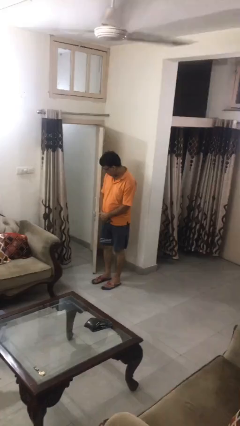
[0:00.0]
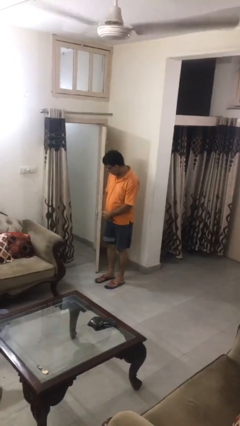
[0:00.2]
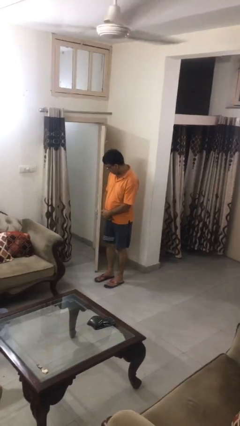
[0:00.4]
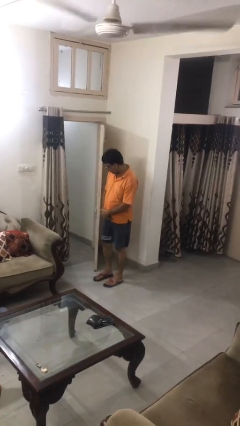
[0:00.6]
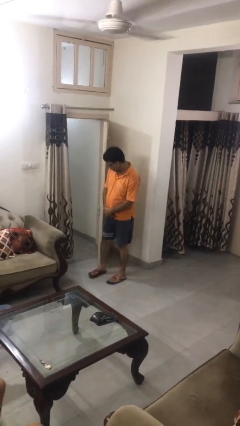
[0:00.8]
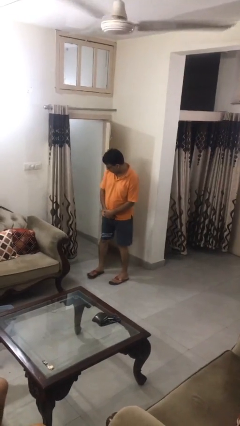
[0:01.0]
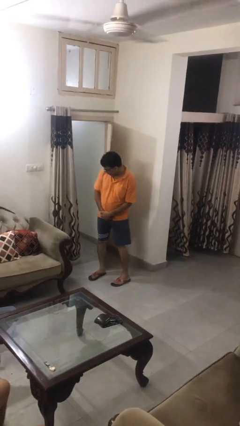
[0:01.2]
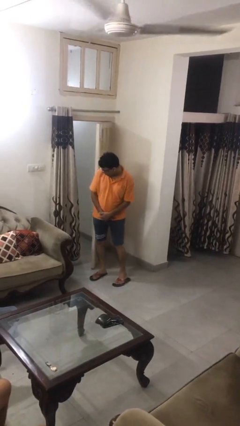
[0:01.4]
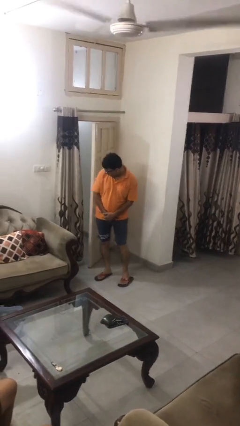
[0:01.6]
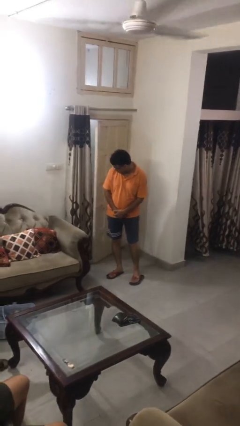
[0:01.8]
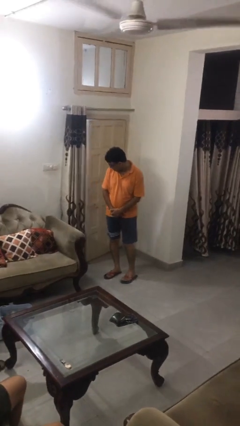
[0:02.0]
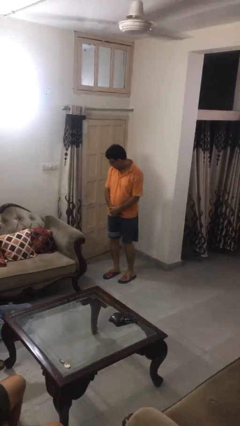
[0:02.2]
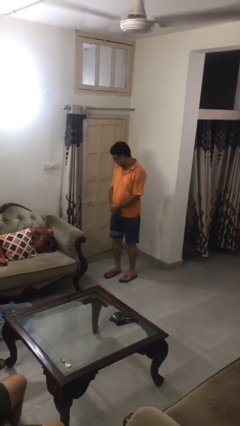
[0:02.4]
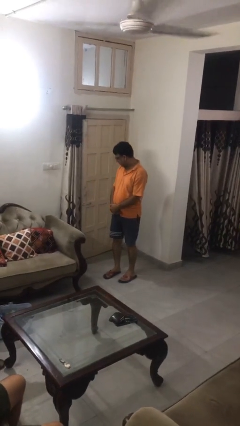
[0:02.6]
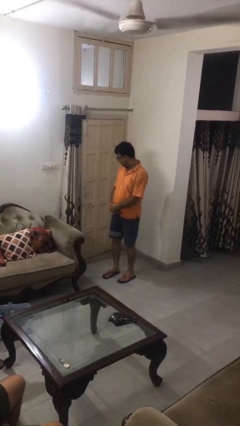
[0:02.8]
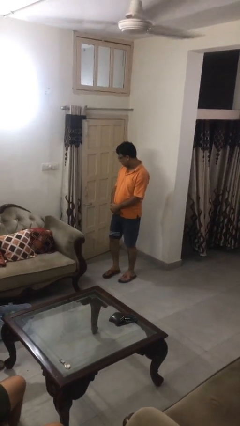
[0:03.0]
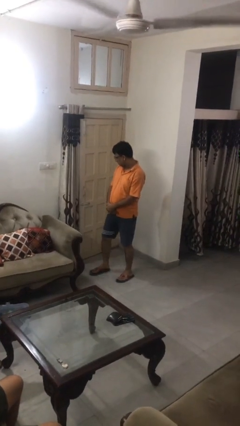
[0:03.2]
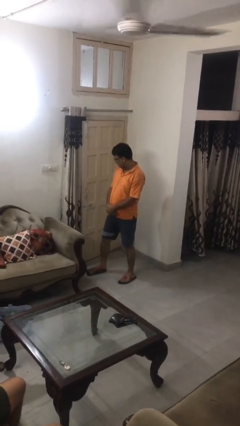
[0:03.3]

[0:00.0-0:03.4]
person closes door with hip

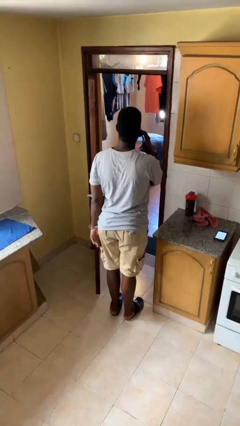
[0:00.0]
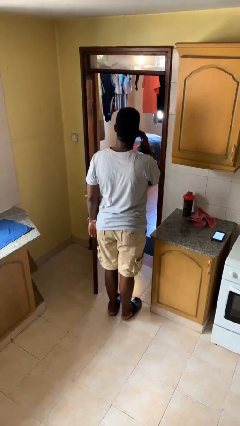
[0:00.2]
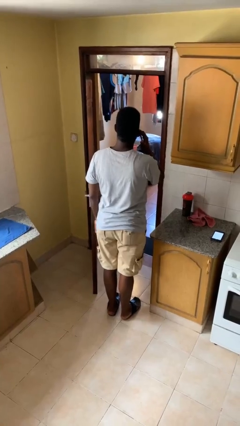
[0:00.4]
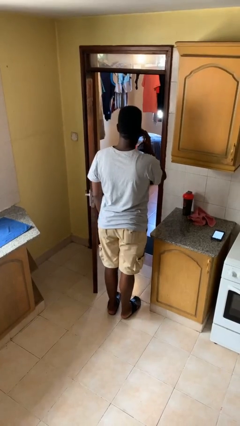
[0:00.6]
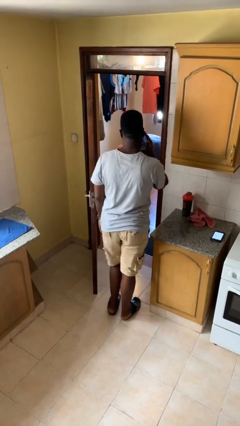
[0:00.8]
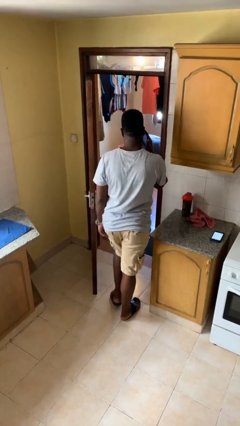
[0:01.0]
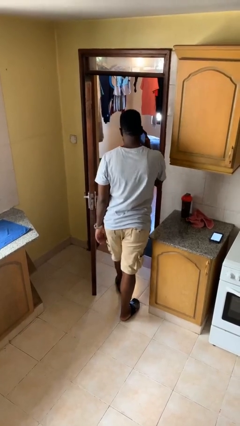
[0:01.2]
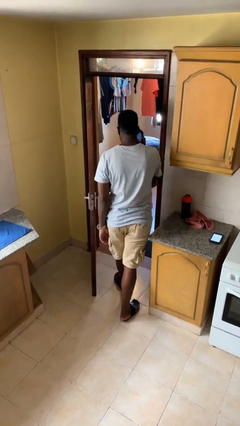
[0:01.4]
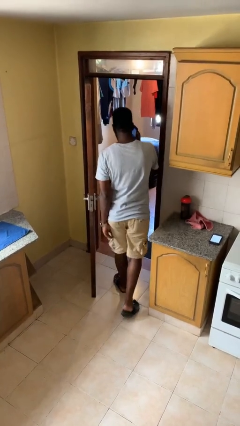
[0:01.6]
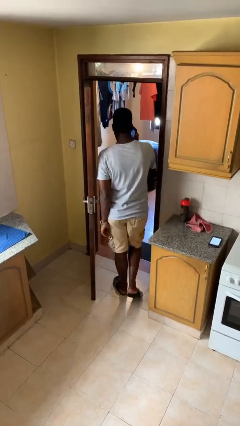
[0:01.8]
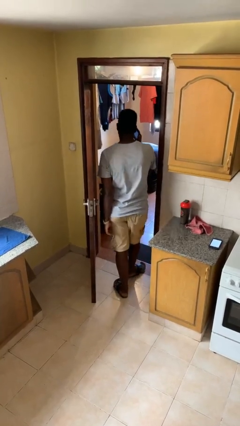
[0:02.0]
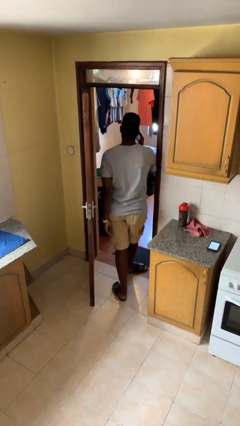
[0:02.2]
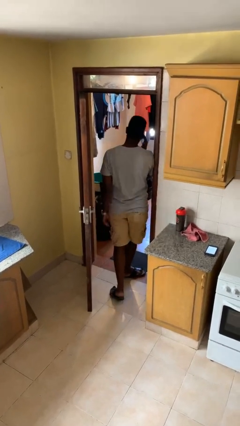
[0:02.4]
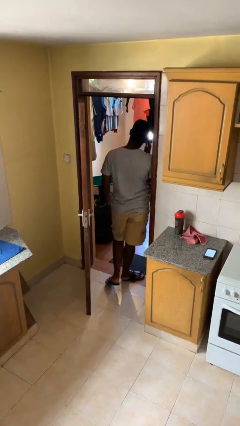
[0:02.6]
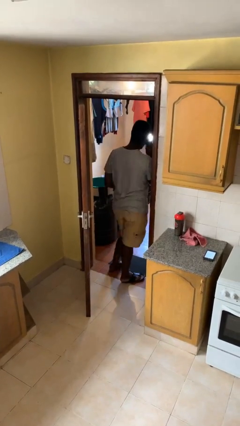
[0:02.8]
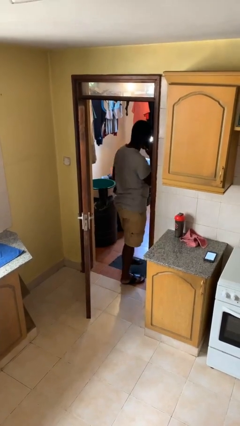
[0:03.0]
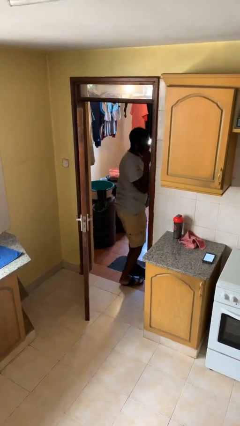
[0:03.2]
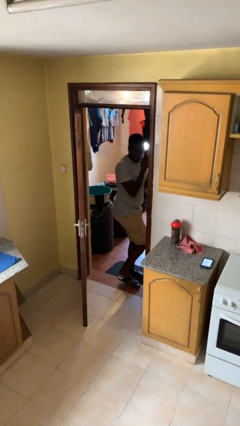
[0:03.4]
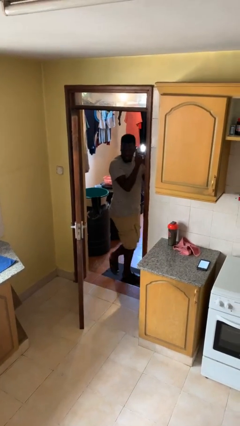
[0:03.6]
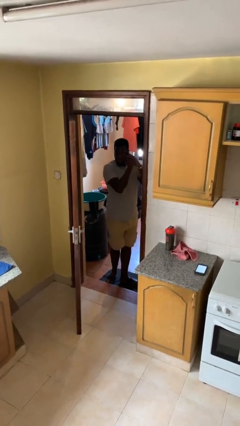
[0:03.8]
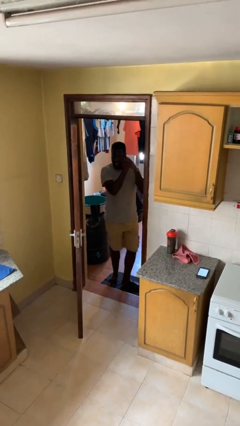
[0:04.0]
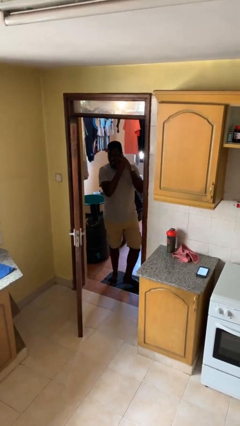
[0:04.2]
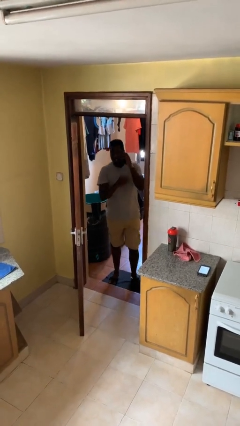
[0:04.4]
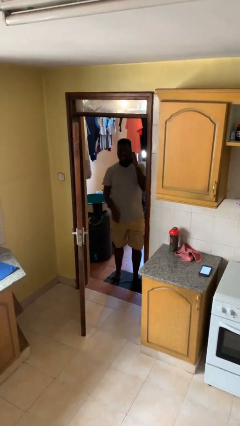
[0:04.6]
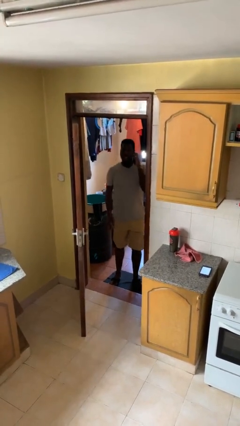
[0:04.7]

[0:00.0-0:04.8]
person exits scene through structure

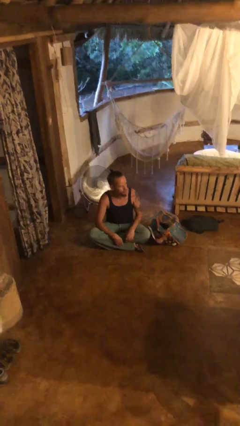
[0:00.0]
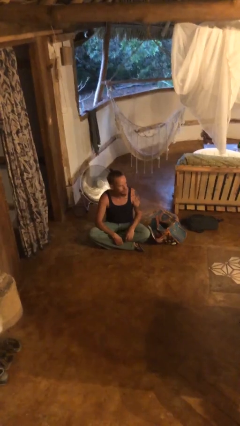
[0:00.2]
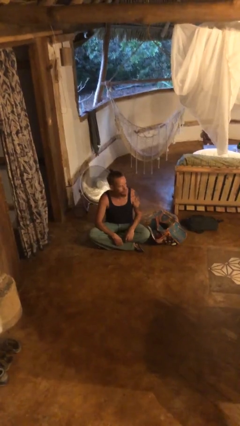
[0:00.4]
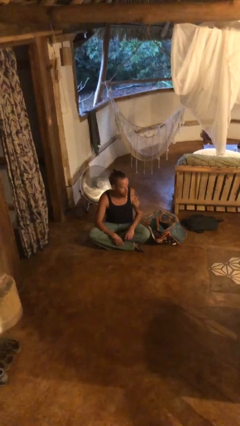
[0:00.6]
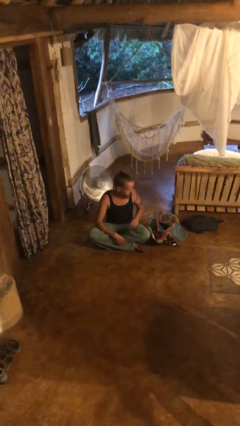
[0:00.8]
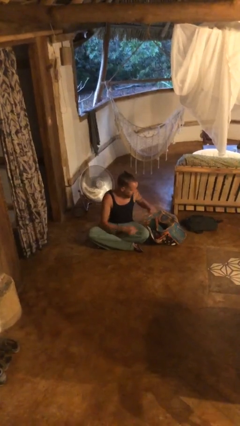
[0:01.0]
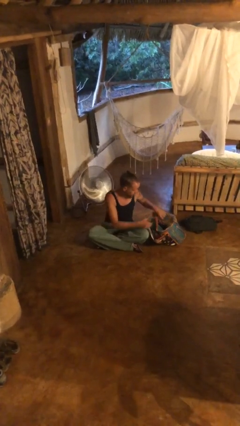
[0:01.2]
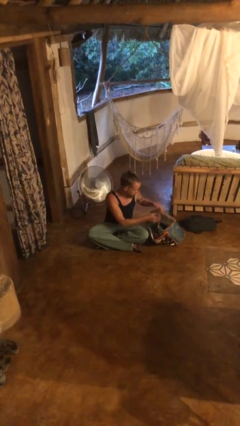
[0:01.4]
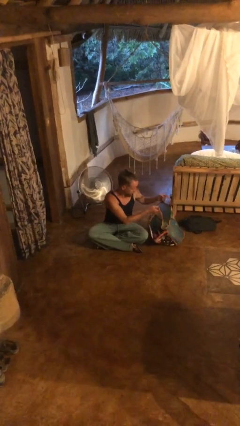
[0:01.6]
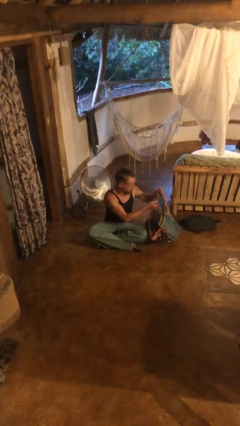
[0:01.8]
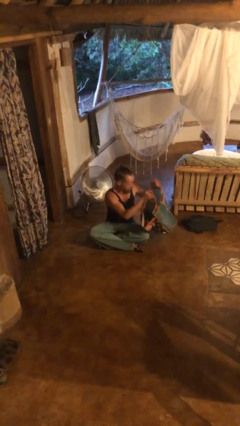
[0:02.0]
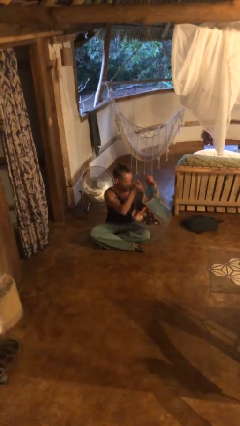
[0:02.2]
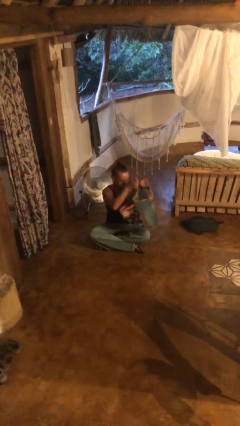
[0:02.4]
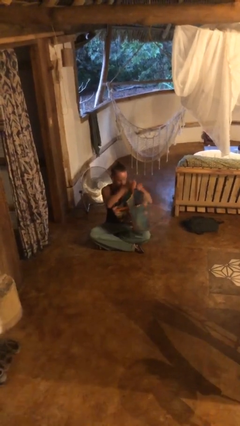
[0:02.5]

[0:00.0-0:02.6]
person picks up object from floor

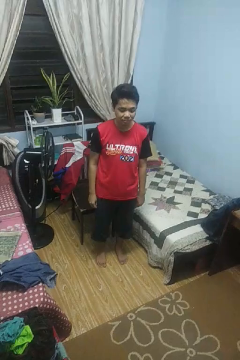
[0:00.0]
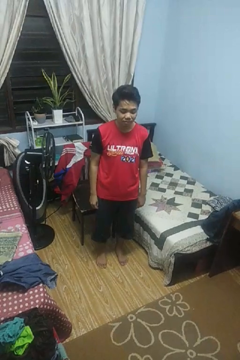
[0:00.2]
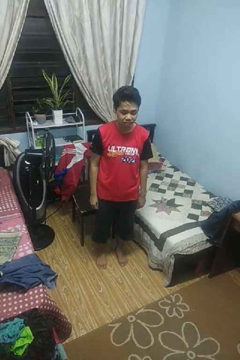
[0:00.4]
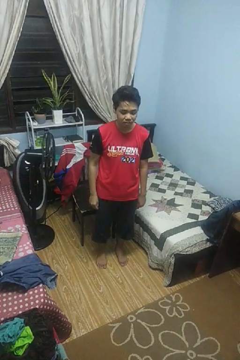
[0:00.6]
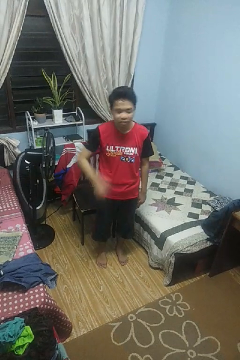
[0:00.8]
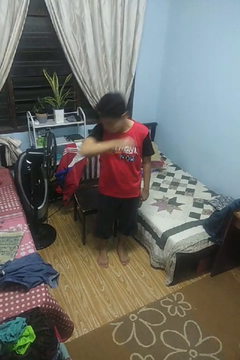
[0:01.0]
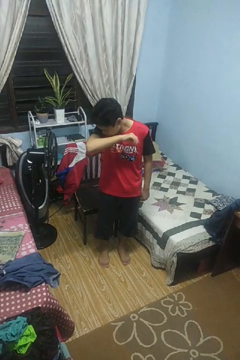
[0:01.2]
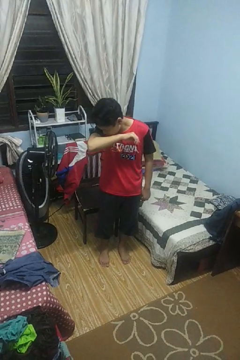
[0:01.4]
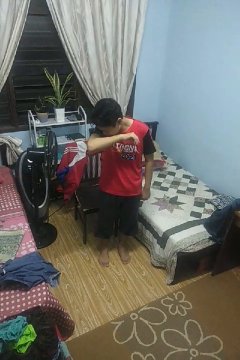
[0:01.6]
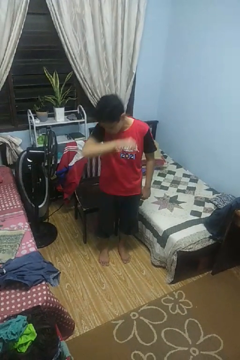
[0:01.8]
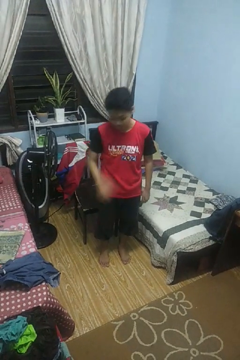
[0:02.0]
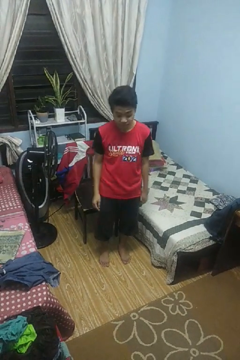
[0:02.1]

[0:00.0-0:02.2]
person sneezes into arm

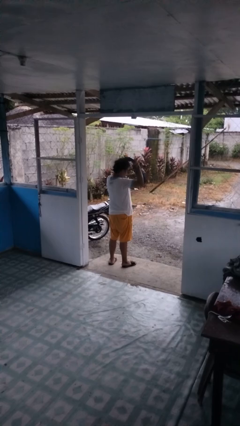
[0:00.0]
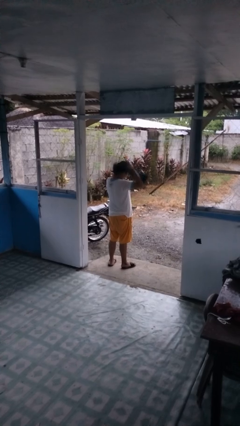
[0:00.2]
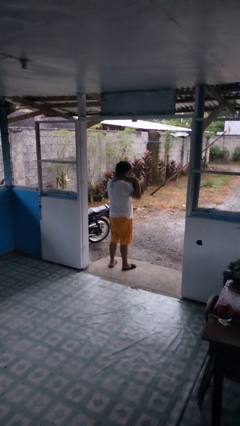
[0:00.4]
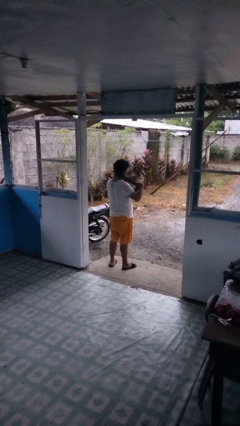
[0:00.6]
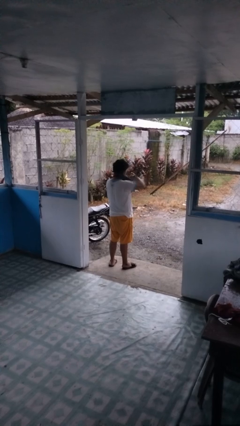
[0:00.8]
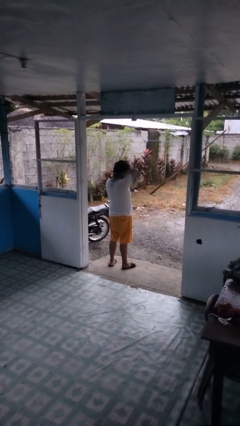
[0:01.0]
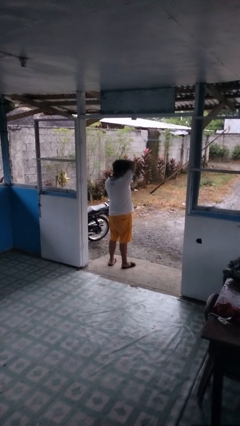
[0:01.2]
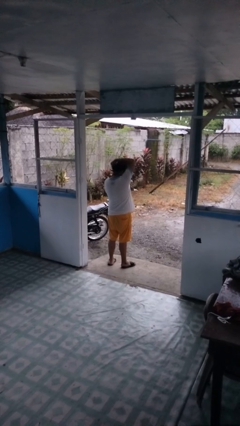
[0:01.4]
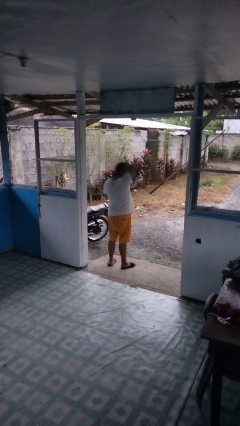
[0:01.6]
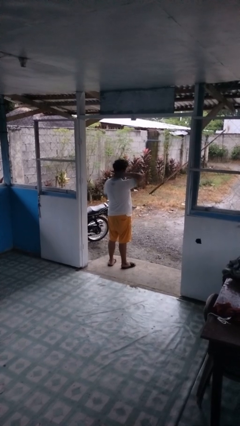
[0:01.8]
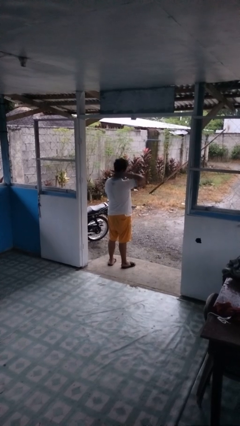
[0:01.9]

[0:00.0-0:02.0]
person puts on scarf

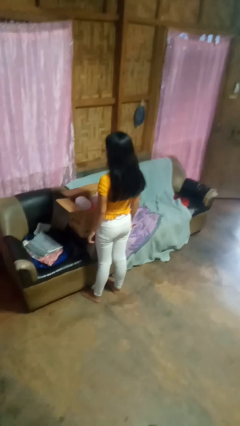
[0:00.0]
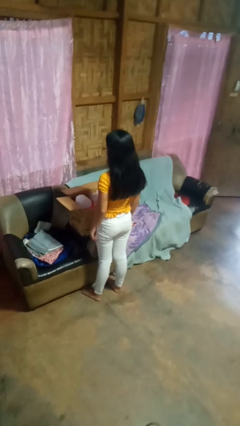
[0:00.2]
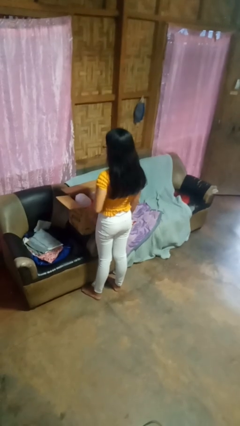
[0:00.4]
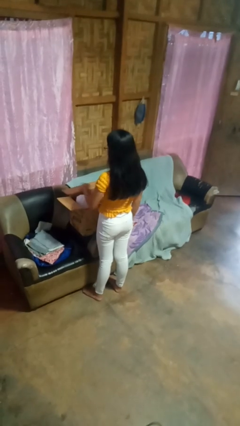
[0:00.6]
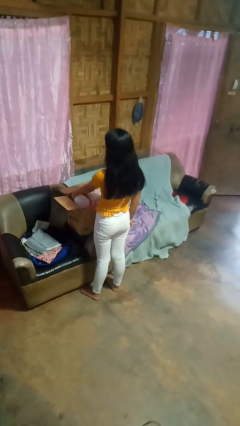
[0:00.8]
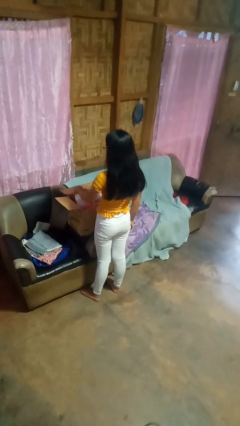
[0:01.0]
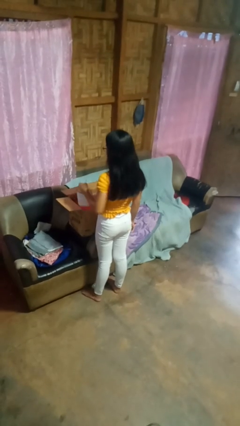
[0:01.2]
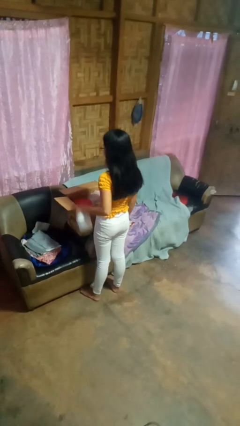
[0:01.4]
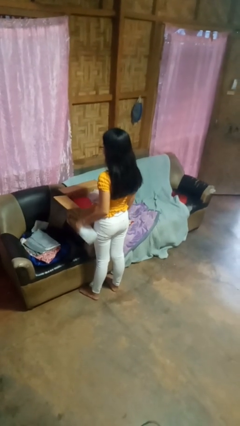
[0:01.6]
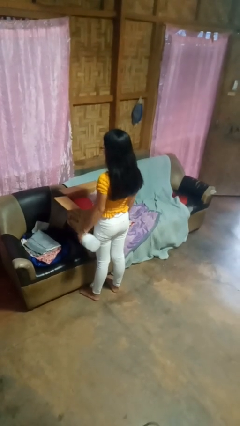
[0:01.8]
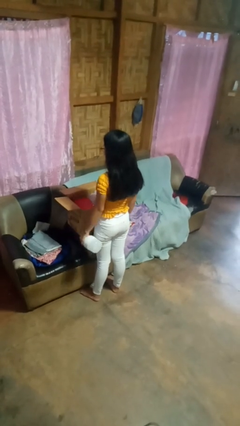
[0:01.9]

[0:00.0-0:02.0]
person takes object from box

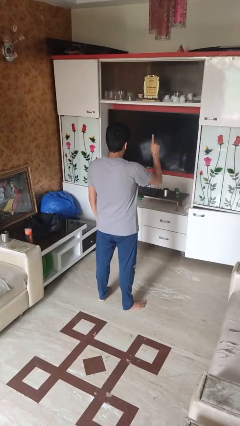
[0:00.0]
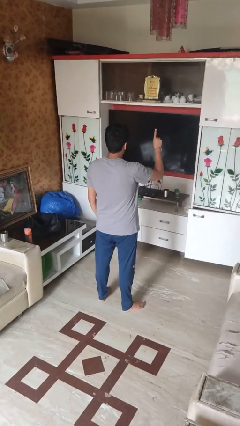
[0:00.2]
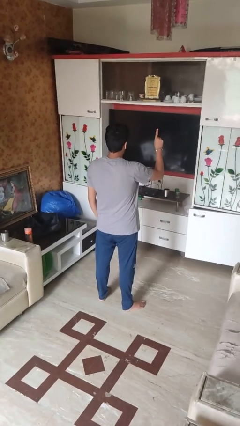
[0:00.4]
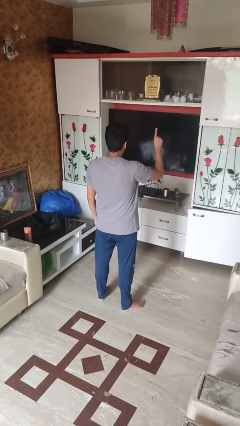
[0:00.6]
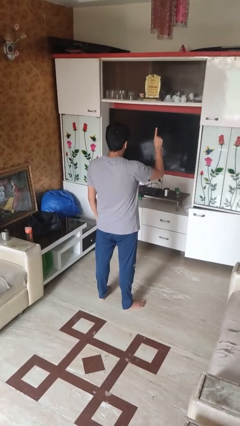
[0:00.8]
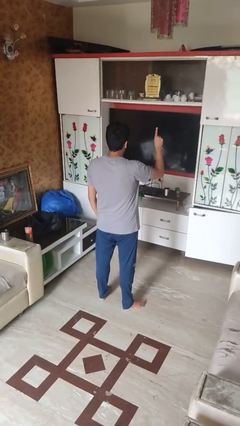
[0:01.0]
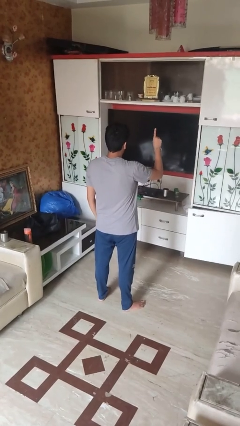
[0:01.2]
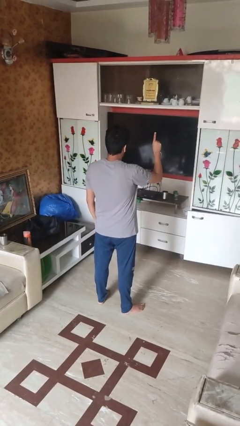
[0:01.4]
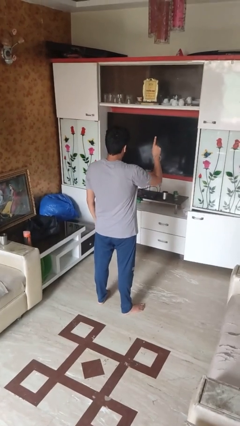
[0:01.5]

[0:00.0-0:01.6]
person gestures number one
